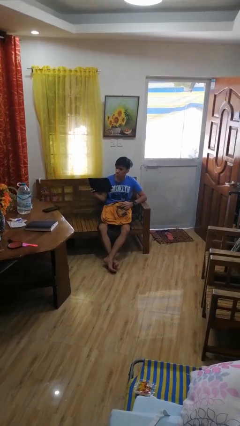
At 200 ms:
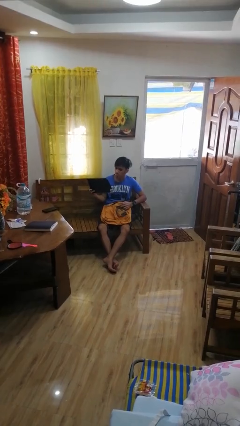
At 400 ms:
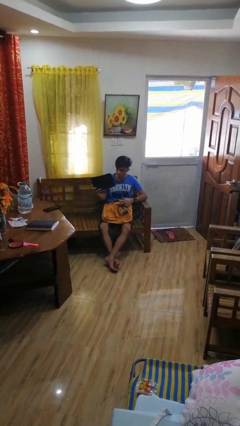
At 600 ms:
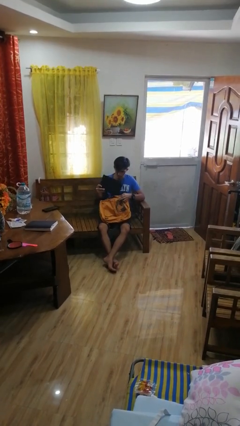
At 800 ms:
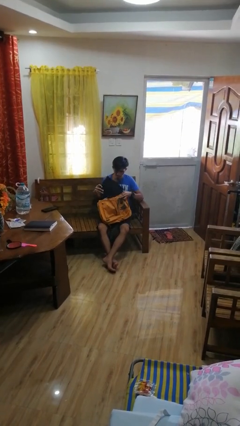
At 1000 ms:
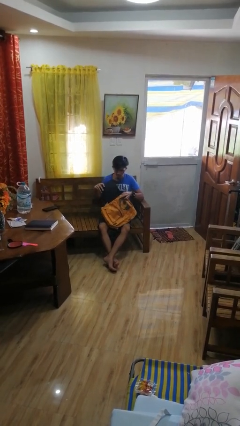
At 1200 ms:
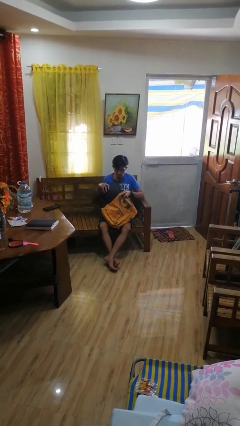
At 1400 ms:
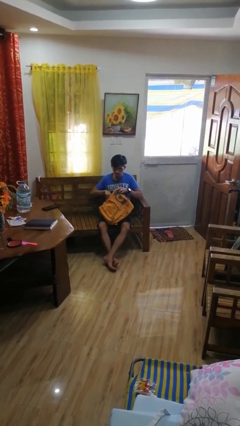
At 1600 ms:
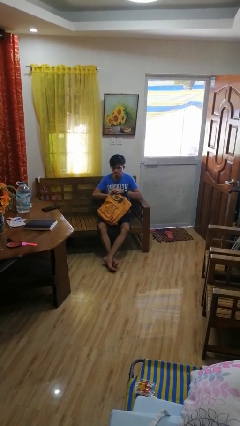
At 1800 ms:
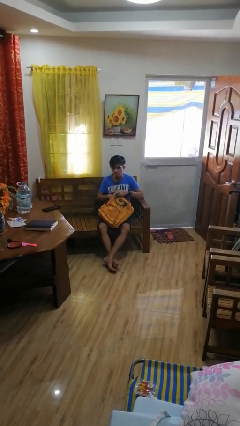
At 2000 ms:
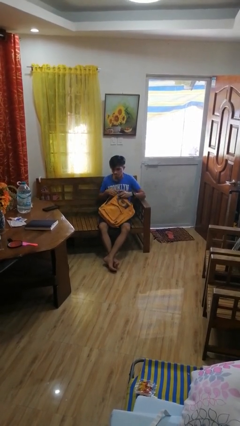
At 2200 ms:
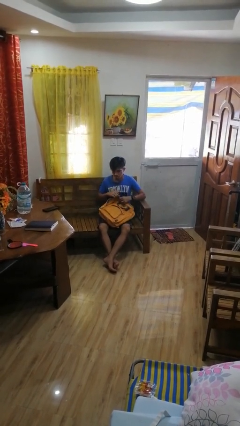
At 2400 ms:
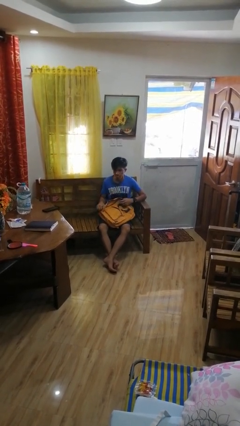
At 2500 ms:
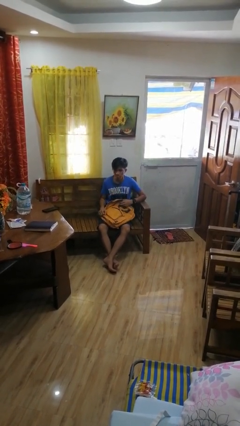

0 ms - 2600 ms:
person puts object into backpack

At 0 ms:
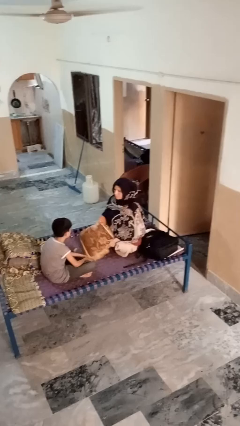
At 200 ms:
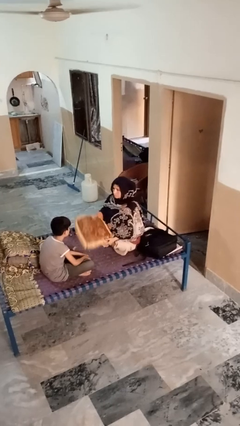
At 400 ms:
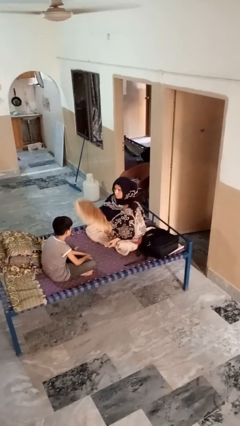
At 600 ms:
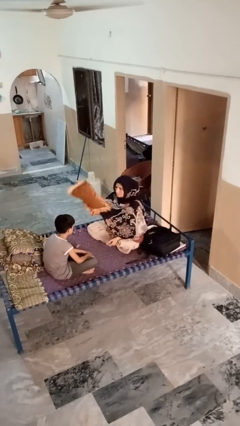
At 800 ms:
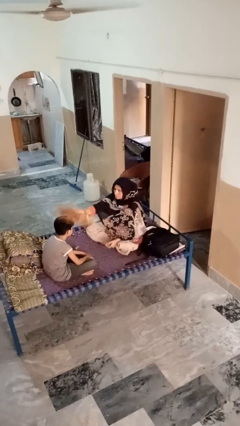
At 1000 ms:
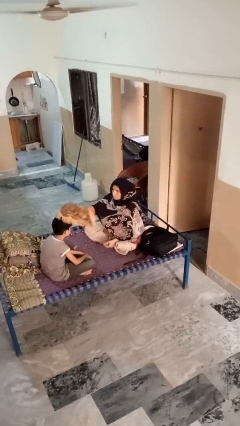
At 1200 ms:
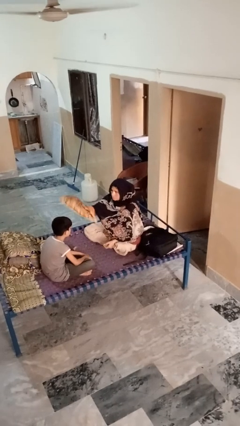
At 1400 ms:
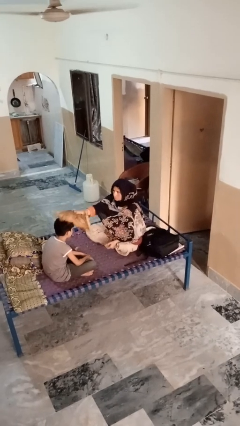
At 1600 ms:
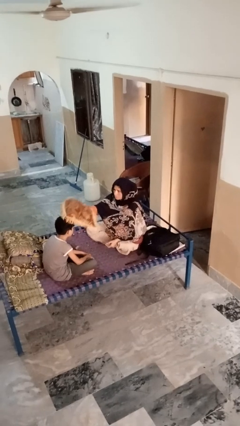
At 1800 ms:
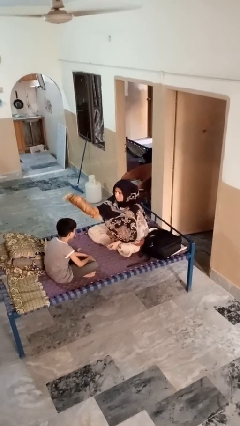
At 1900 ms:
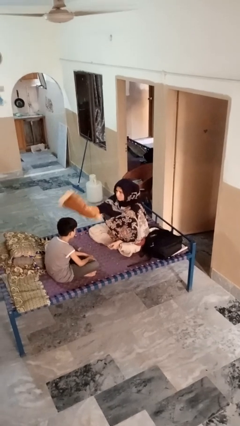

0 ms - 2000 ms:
person hits person with pillow

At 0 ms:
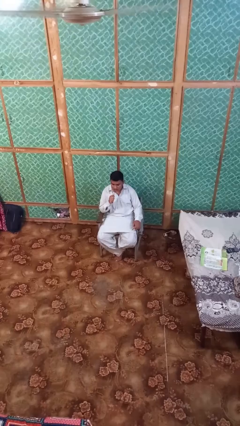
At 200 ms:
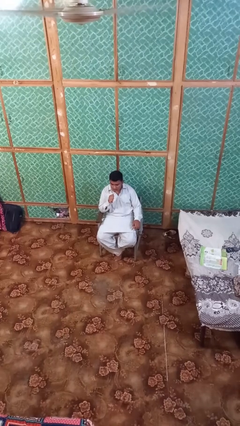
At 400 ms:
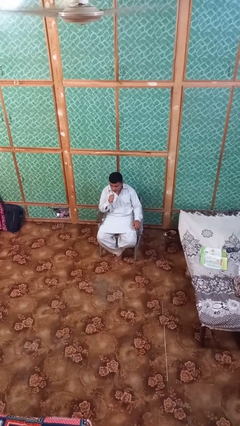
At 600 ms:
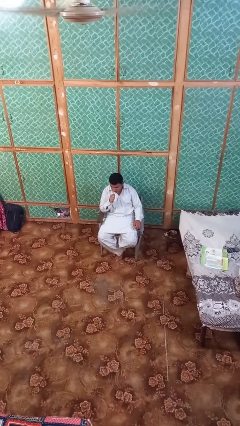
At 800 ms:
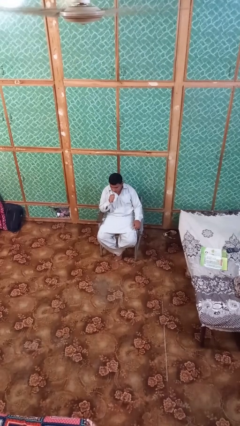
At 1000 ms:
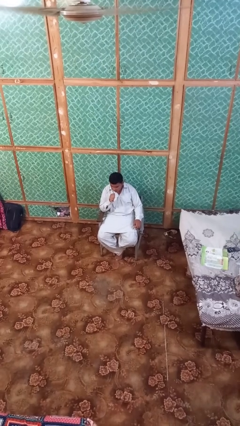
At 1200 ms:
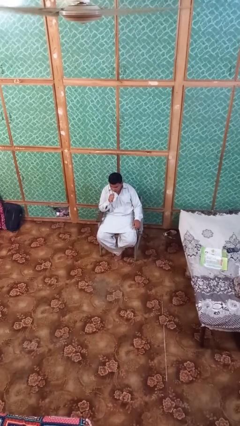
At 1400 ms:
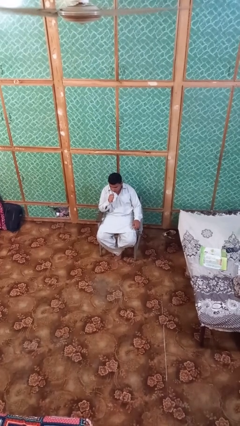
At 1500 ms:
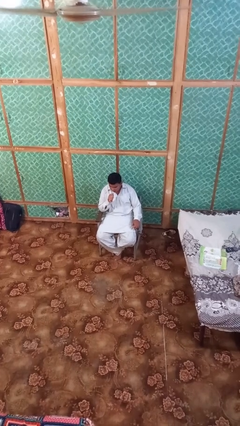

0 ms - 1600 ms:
person vapes

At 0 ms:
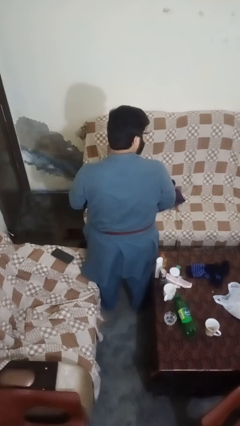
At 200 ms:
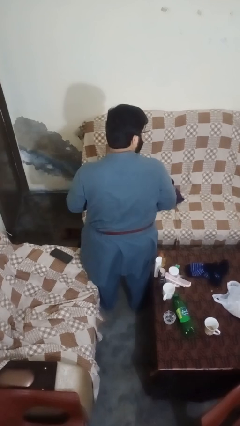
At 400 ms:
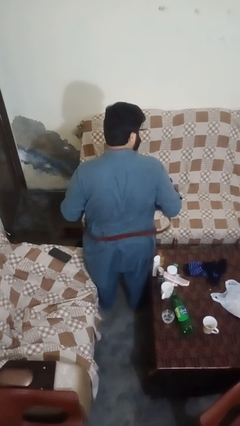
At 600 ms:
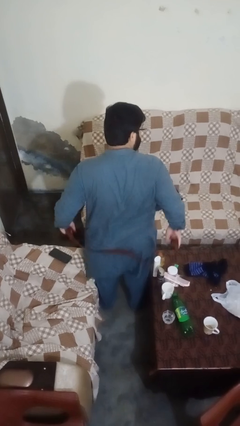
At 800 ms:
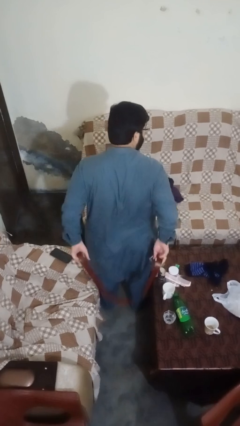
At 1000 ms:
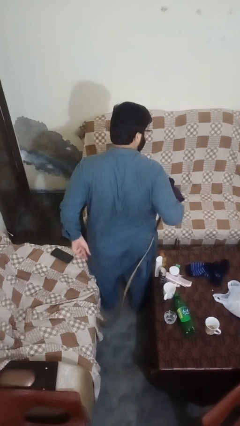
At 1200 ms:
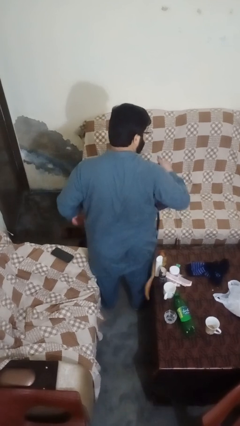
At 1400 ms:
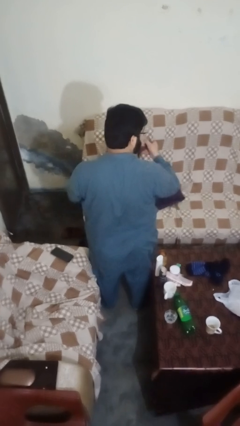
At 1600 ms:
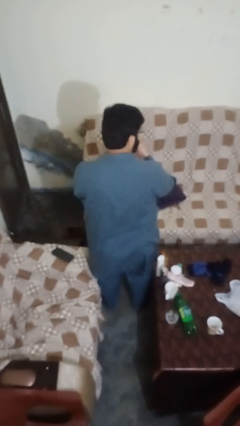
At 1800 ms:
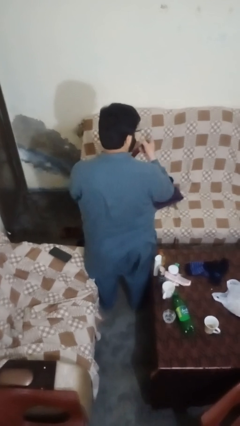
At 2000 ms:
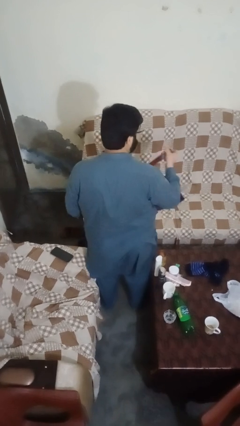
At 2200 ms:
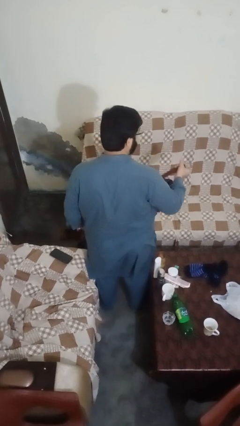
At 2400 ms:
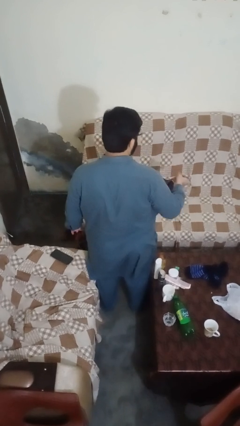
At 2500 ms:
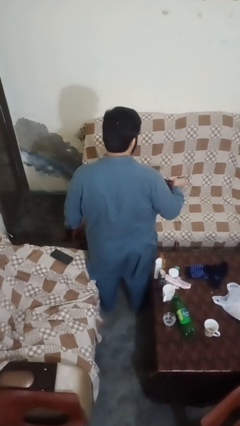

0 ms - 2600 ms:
person takes off belt

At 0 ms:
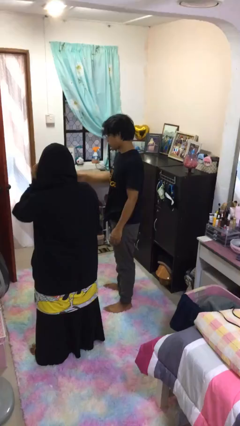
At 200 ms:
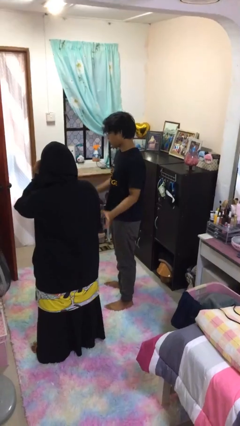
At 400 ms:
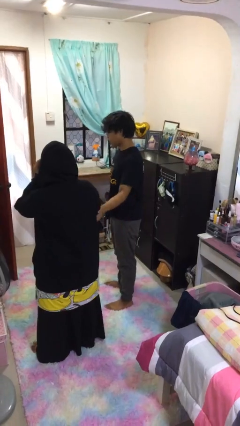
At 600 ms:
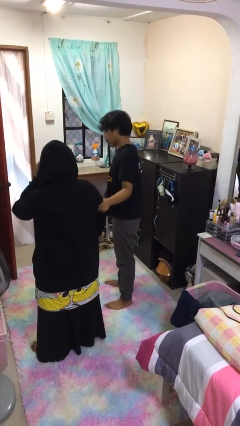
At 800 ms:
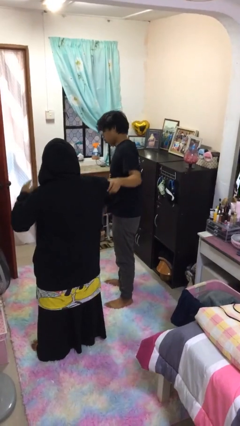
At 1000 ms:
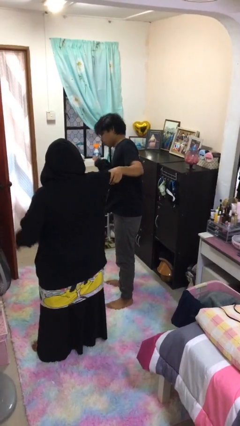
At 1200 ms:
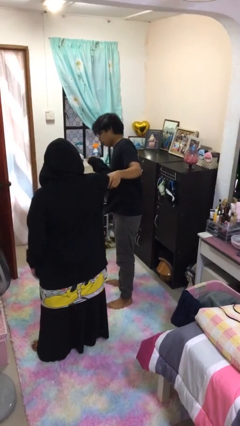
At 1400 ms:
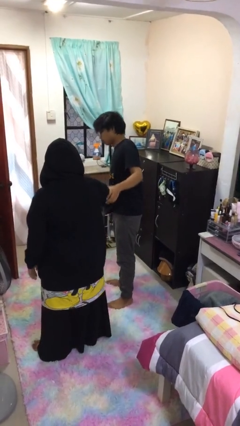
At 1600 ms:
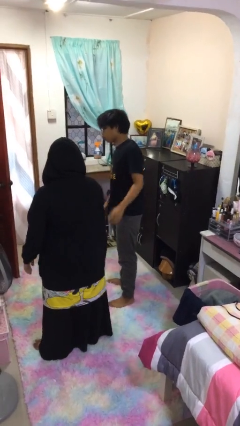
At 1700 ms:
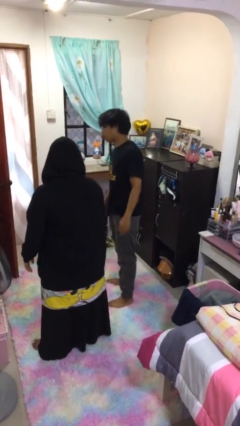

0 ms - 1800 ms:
person grabs person by bicep

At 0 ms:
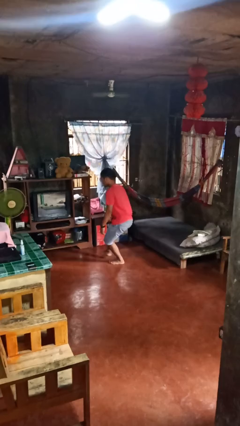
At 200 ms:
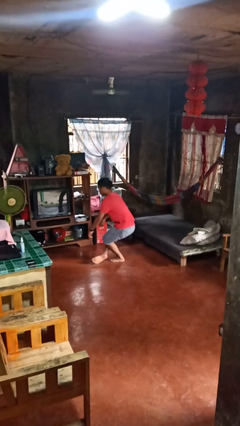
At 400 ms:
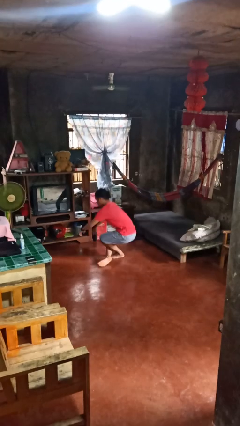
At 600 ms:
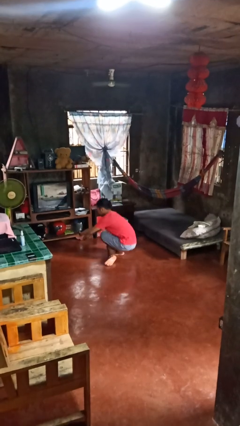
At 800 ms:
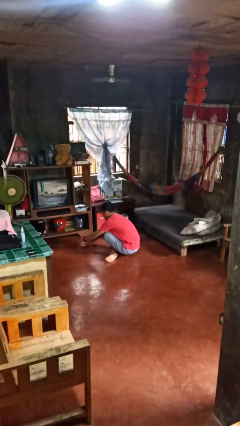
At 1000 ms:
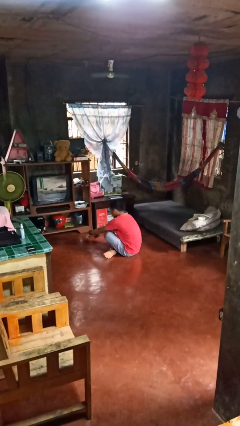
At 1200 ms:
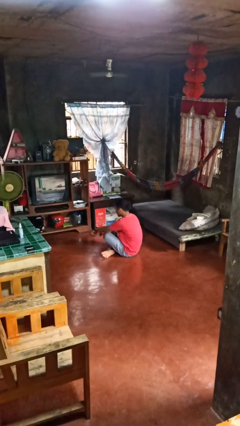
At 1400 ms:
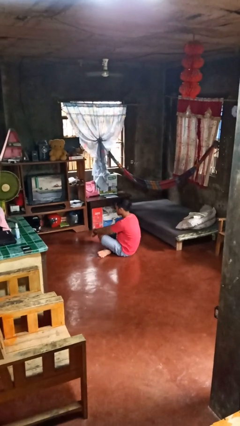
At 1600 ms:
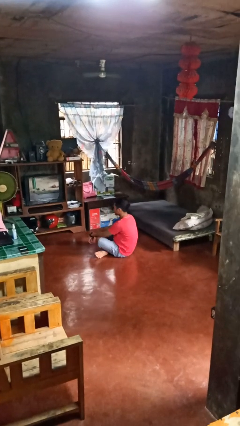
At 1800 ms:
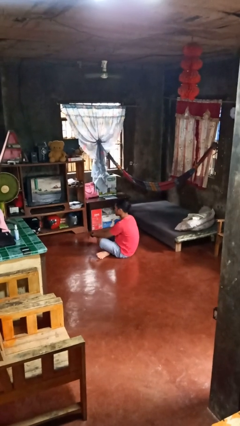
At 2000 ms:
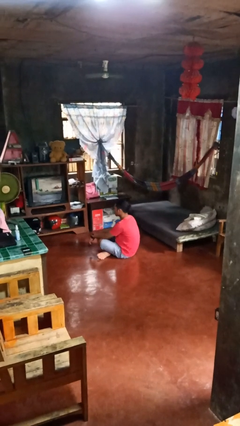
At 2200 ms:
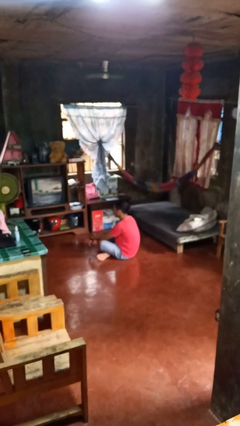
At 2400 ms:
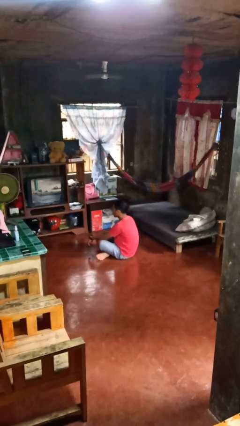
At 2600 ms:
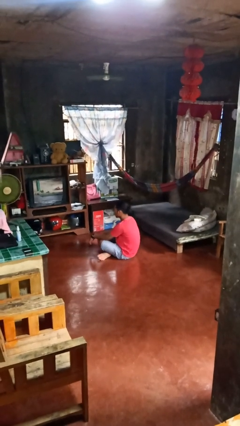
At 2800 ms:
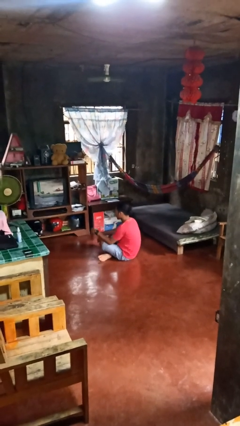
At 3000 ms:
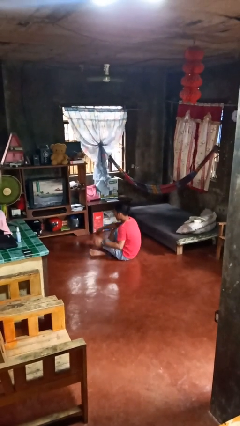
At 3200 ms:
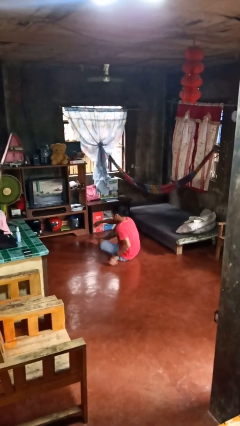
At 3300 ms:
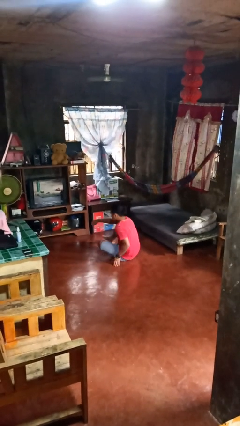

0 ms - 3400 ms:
person sits crisscross

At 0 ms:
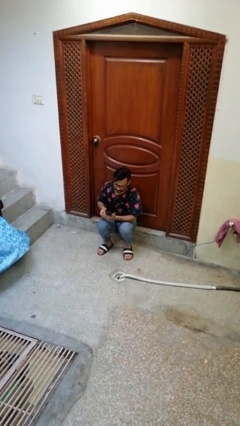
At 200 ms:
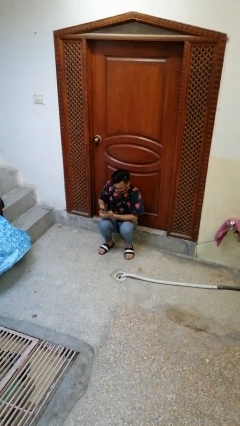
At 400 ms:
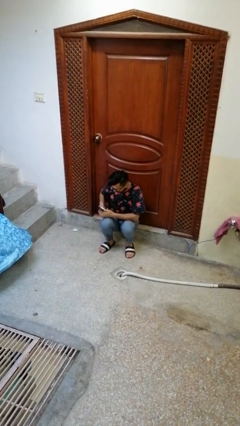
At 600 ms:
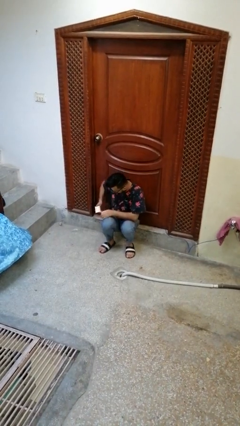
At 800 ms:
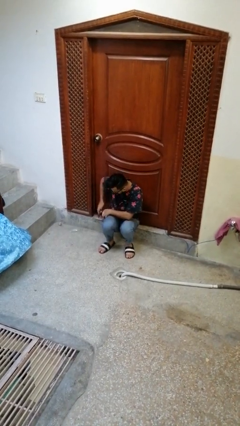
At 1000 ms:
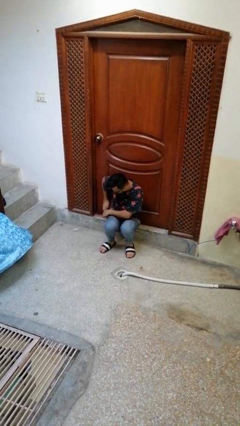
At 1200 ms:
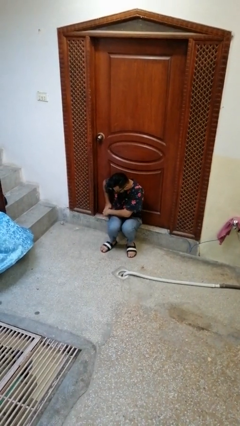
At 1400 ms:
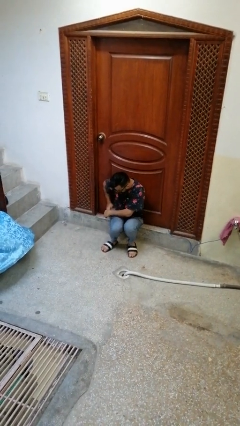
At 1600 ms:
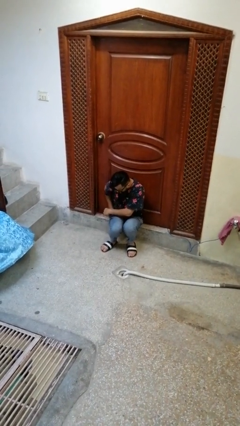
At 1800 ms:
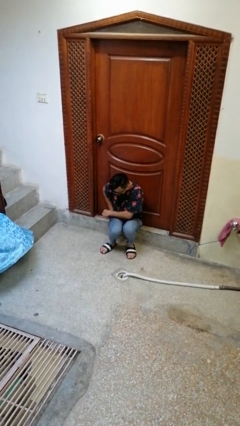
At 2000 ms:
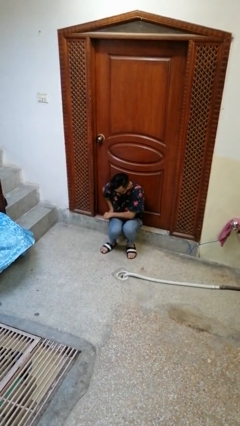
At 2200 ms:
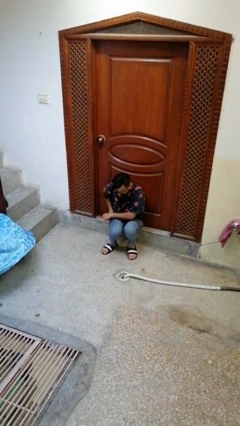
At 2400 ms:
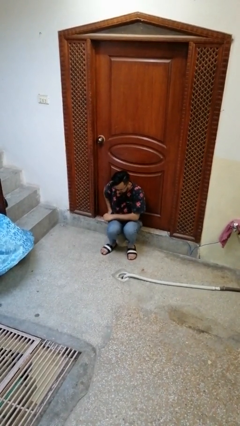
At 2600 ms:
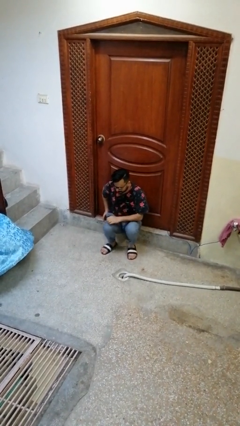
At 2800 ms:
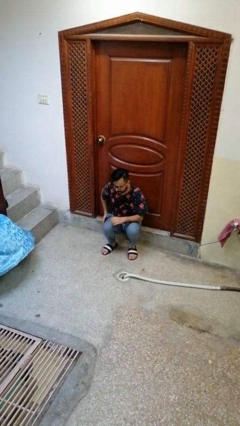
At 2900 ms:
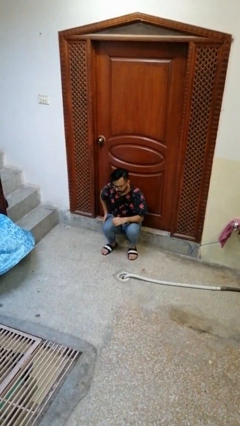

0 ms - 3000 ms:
person puts phone into pocket
